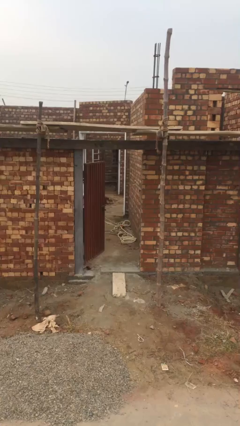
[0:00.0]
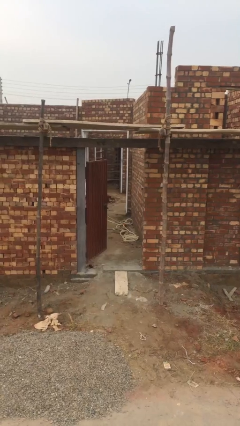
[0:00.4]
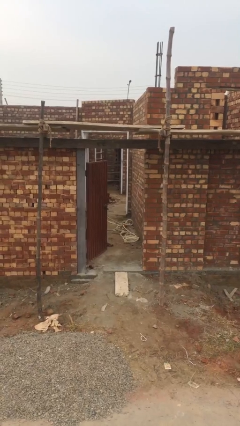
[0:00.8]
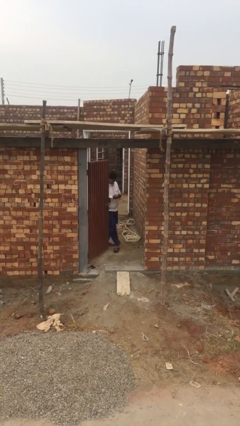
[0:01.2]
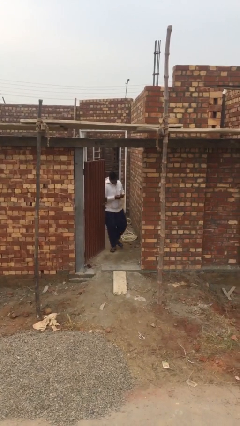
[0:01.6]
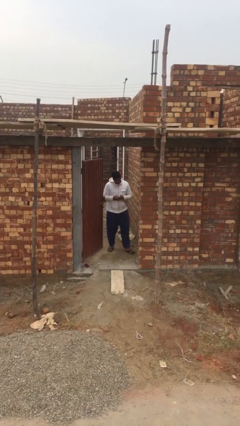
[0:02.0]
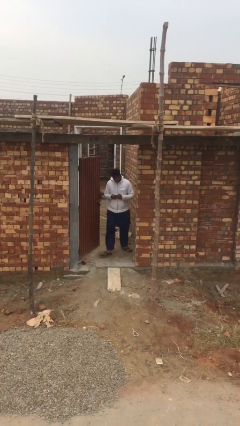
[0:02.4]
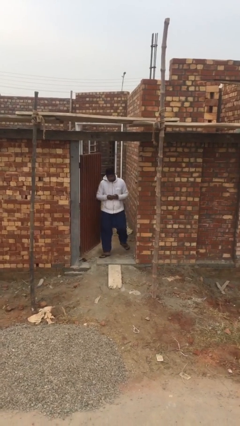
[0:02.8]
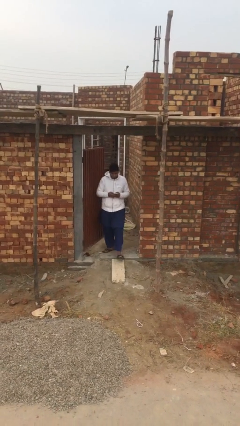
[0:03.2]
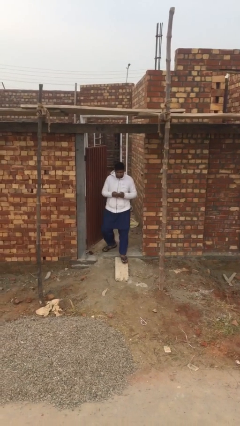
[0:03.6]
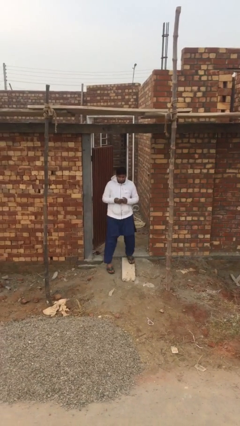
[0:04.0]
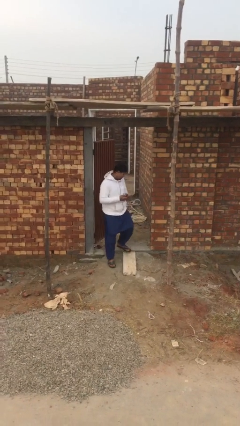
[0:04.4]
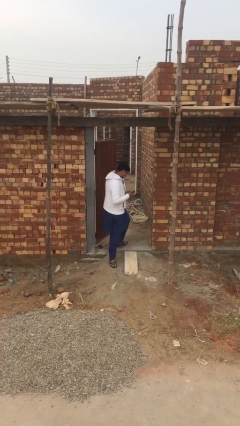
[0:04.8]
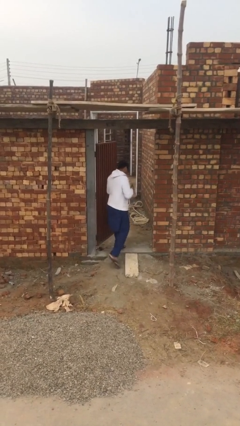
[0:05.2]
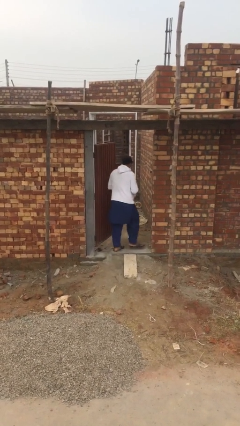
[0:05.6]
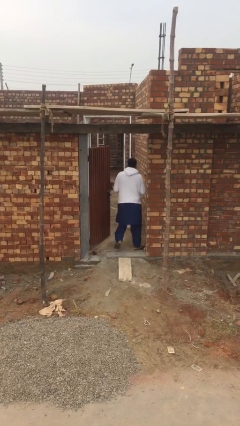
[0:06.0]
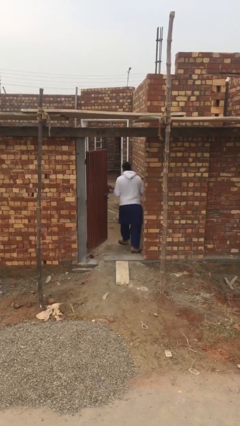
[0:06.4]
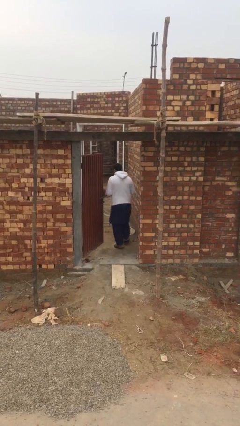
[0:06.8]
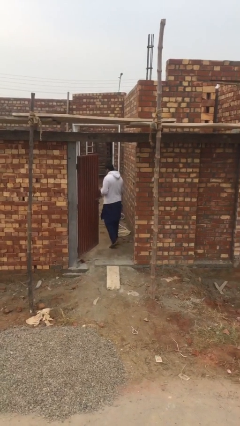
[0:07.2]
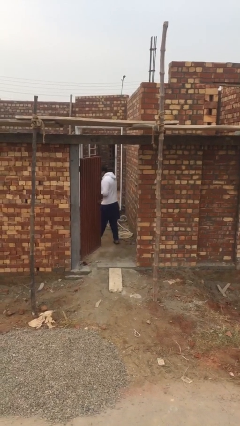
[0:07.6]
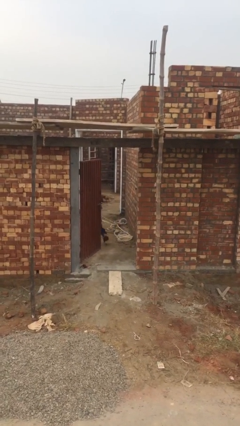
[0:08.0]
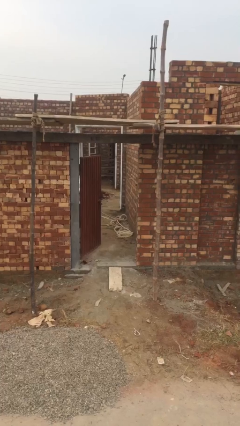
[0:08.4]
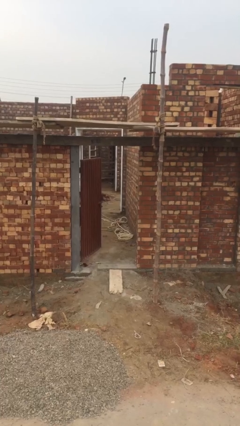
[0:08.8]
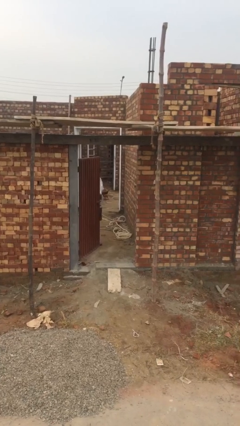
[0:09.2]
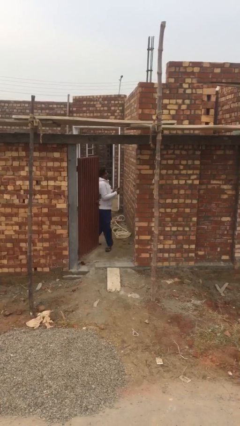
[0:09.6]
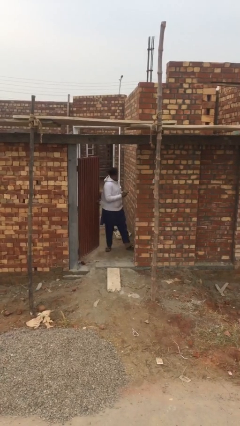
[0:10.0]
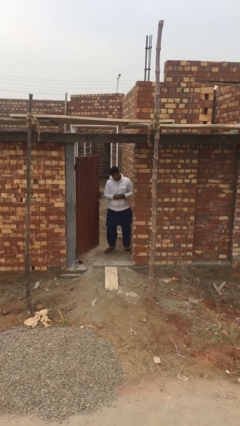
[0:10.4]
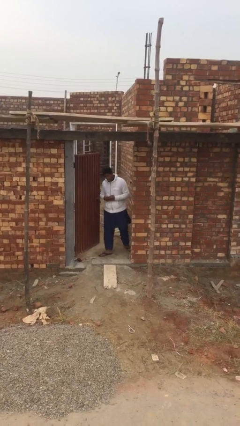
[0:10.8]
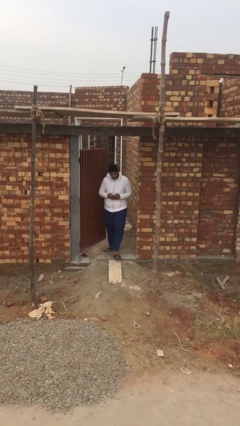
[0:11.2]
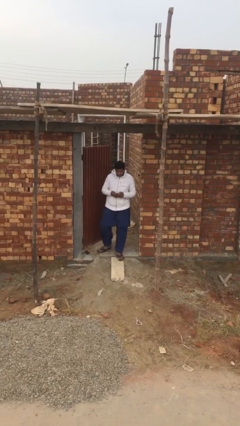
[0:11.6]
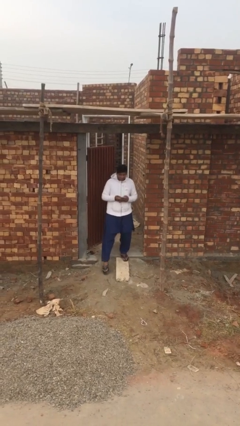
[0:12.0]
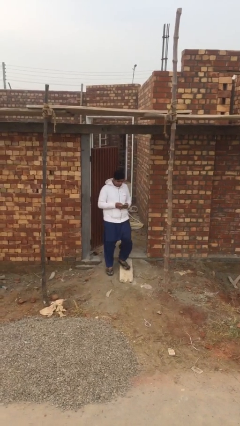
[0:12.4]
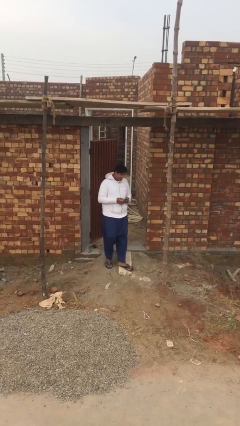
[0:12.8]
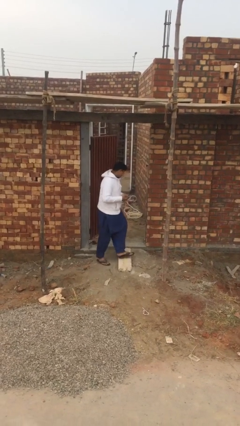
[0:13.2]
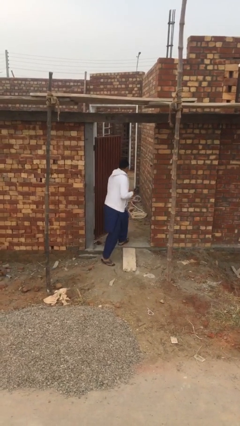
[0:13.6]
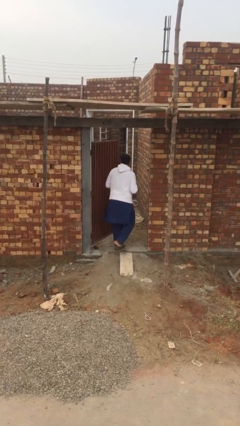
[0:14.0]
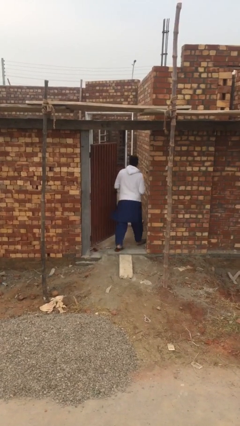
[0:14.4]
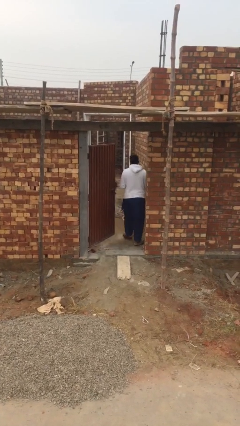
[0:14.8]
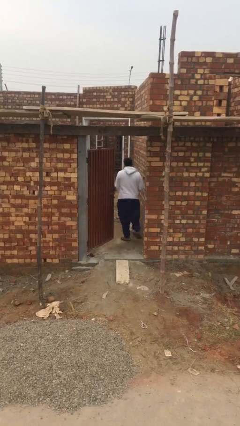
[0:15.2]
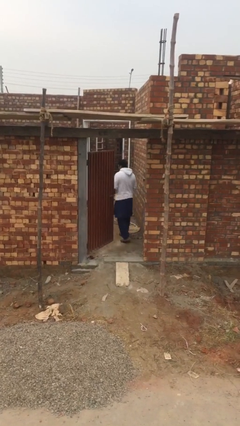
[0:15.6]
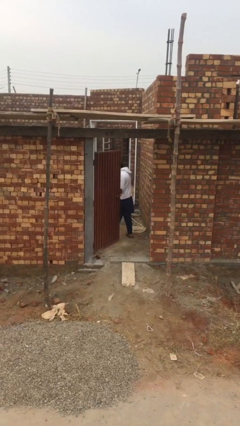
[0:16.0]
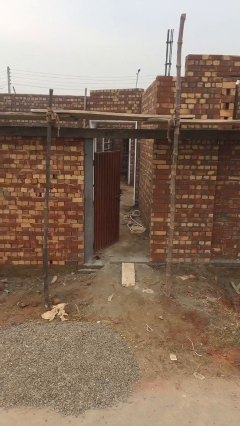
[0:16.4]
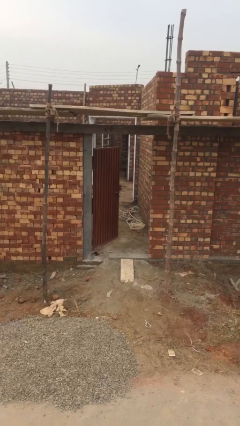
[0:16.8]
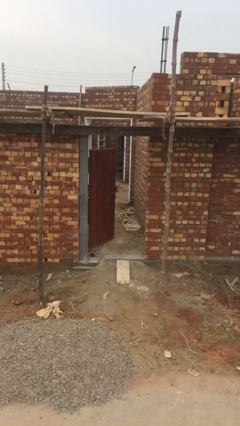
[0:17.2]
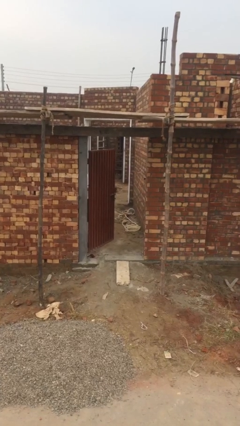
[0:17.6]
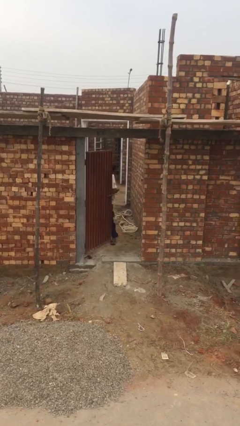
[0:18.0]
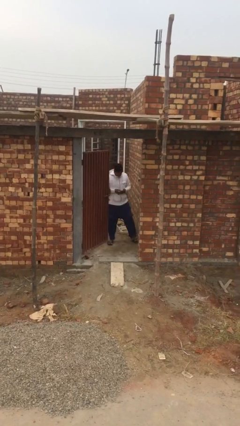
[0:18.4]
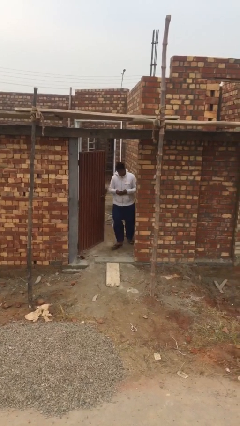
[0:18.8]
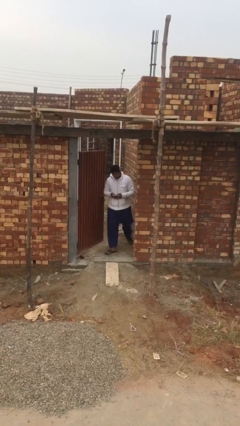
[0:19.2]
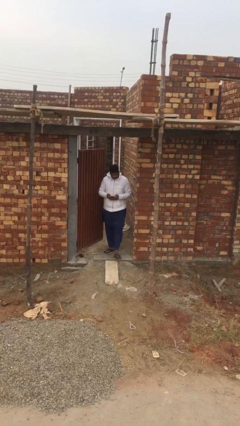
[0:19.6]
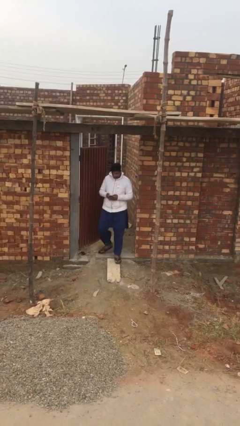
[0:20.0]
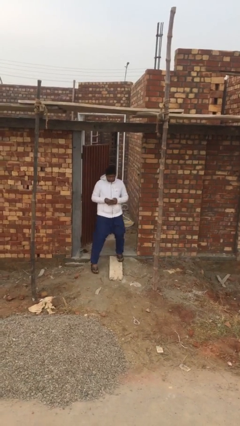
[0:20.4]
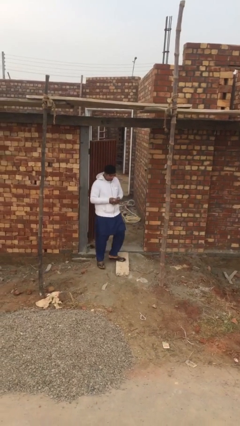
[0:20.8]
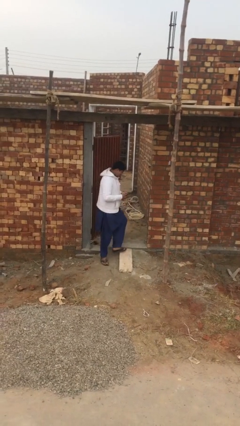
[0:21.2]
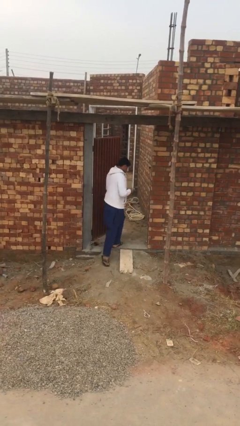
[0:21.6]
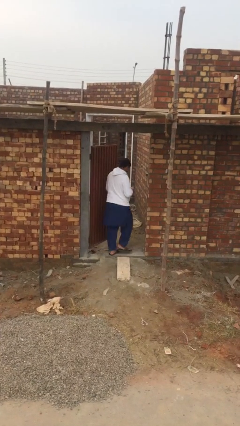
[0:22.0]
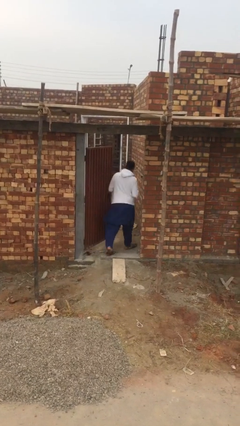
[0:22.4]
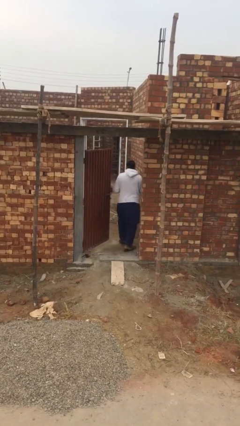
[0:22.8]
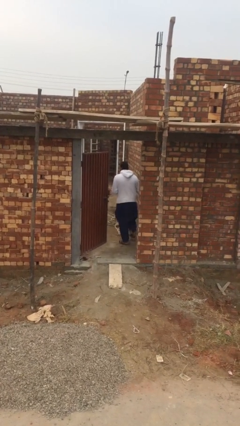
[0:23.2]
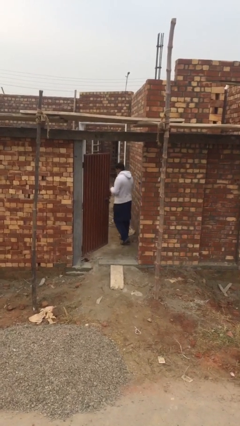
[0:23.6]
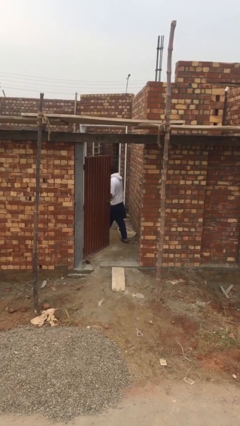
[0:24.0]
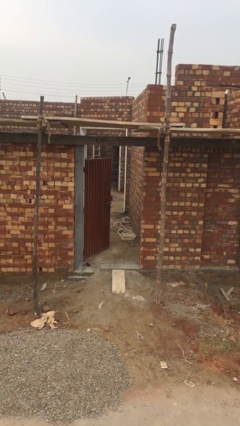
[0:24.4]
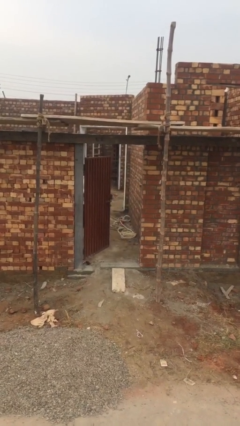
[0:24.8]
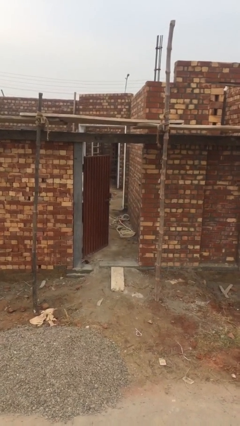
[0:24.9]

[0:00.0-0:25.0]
person texts on phone

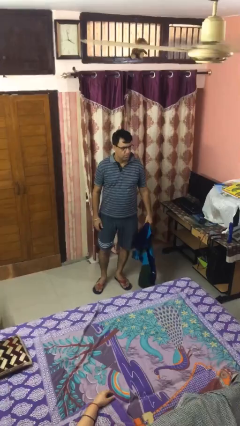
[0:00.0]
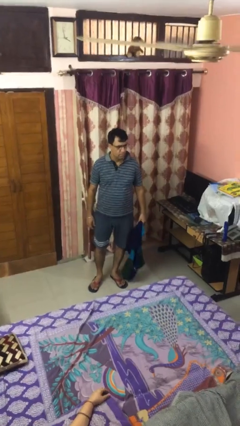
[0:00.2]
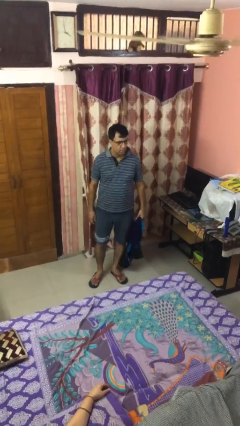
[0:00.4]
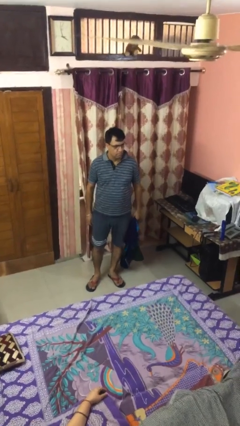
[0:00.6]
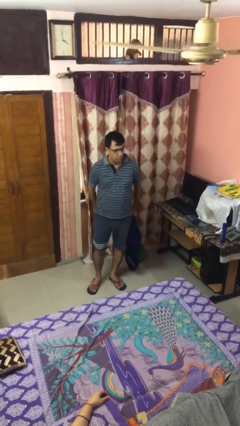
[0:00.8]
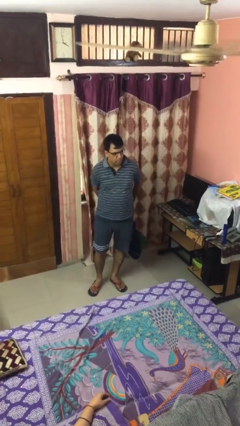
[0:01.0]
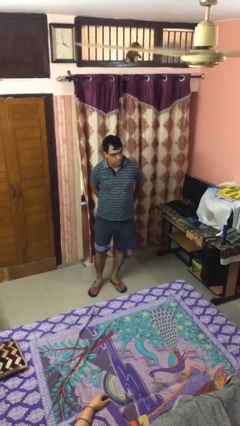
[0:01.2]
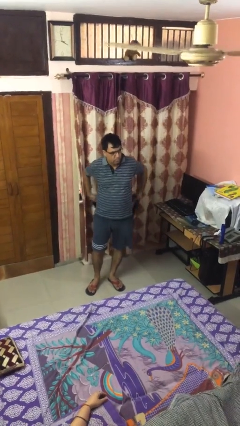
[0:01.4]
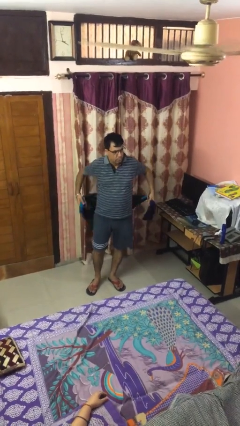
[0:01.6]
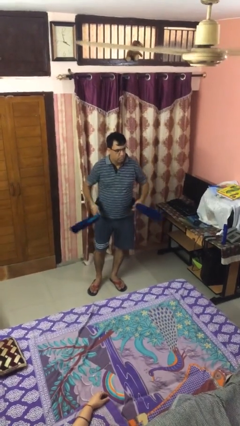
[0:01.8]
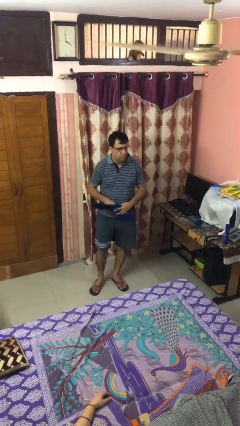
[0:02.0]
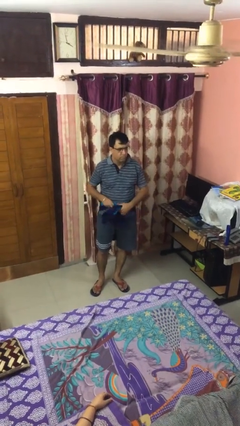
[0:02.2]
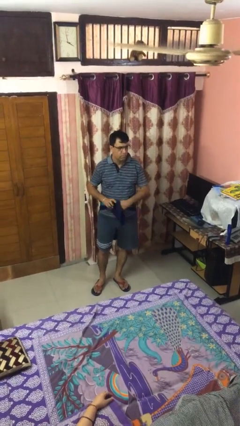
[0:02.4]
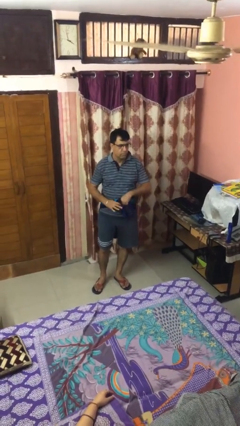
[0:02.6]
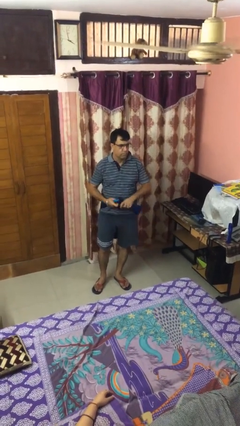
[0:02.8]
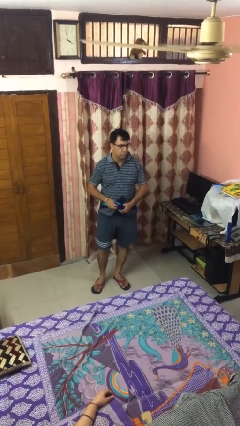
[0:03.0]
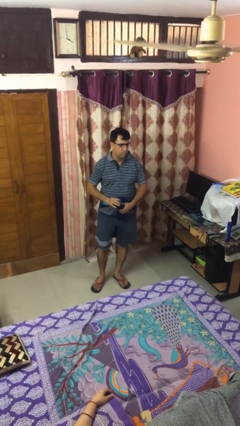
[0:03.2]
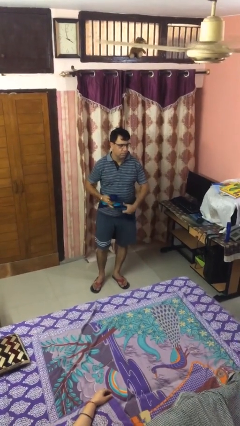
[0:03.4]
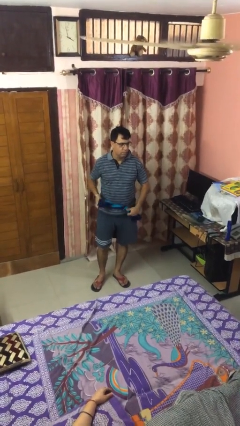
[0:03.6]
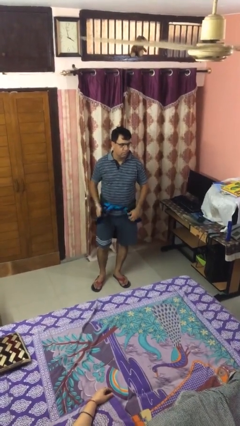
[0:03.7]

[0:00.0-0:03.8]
person ties jacket around waist

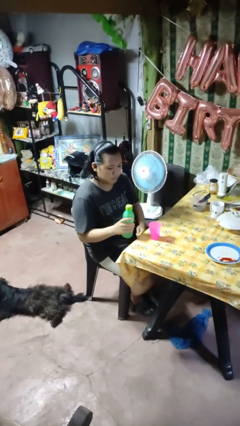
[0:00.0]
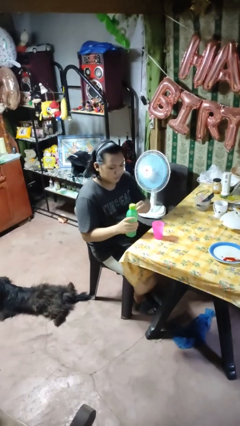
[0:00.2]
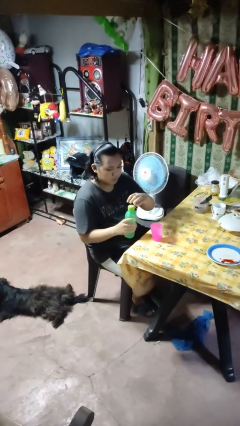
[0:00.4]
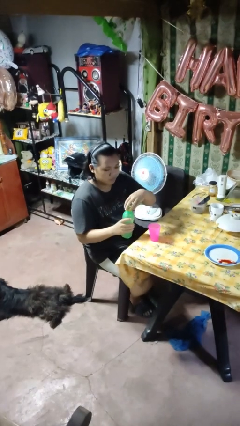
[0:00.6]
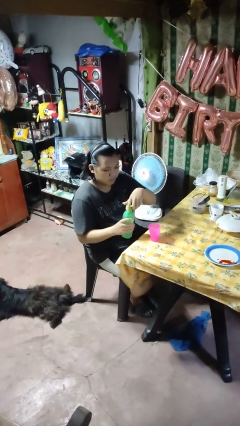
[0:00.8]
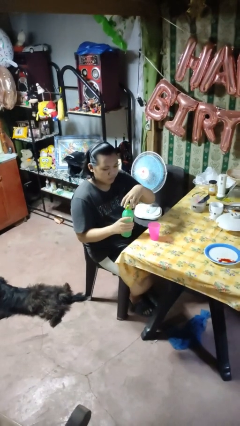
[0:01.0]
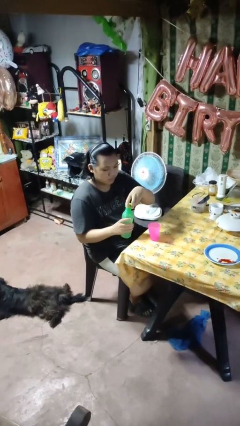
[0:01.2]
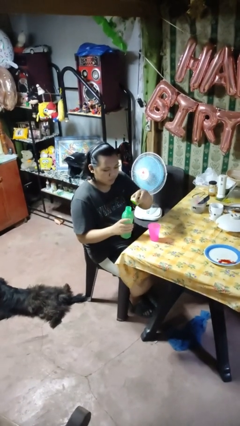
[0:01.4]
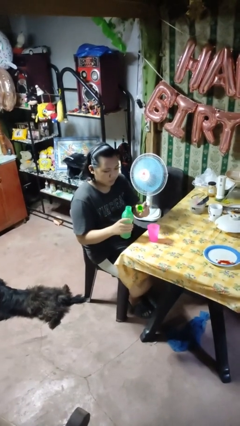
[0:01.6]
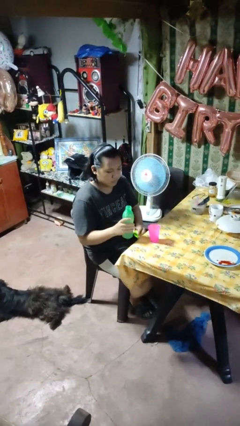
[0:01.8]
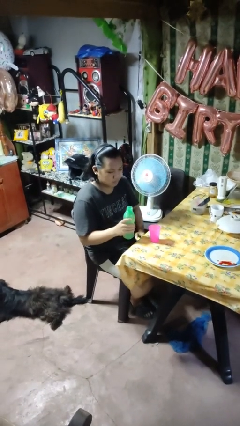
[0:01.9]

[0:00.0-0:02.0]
person unscrews lid from bottle
